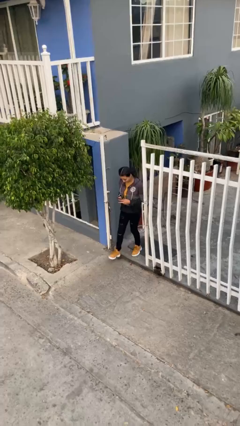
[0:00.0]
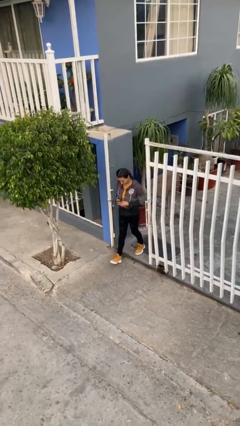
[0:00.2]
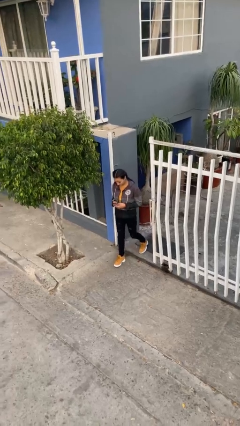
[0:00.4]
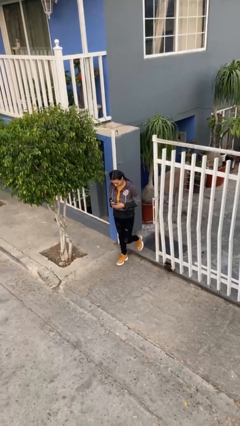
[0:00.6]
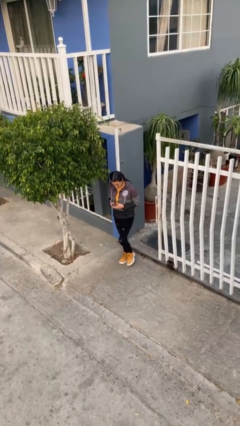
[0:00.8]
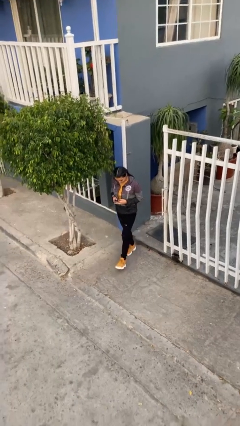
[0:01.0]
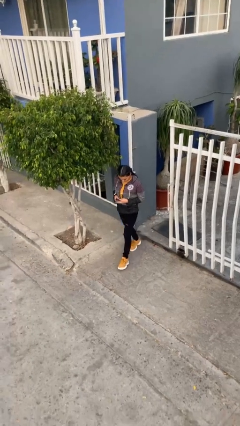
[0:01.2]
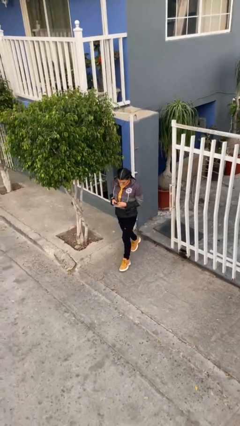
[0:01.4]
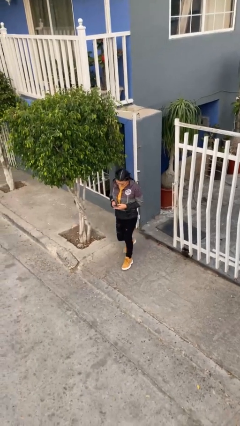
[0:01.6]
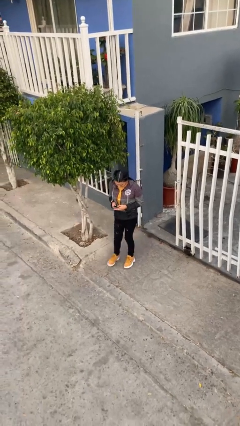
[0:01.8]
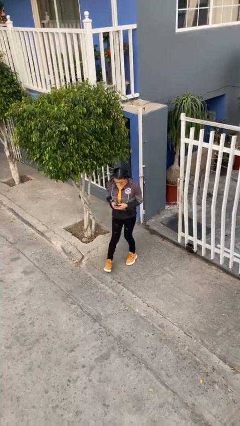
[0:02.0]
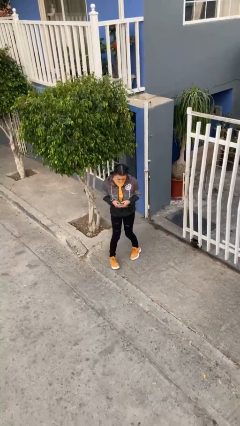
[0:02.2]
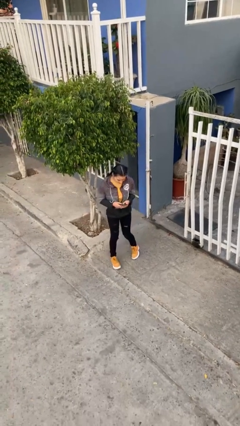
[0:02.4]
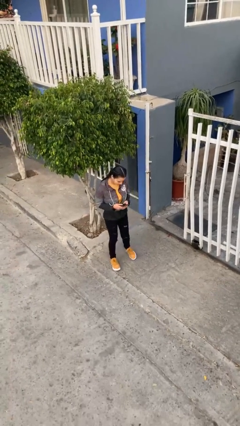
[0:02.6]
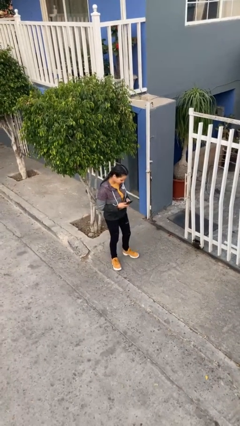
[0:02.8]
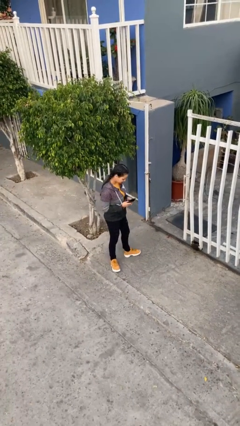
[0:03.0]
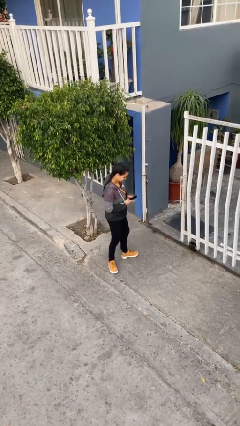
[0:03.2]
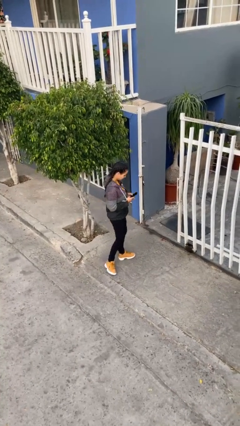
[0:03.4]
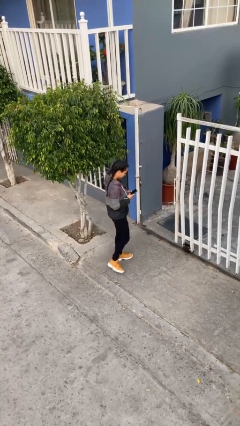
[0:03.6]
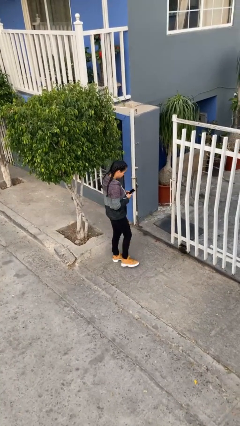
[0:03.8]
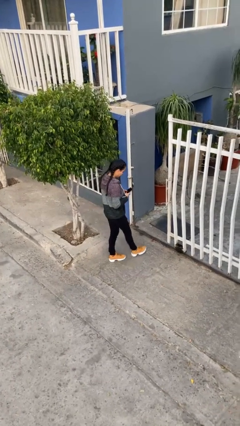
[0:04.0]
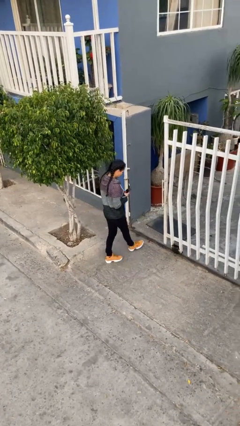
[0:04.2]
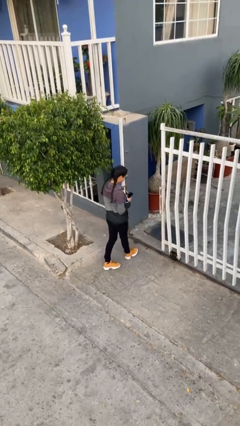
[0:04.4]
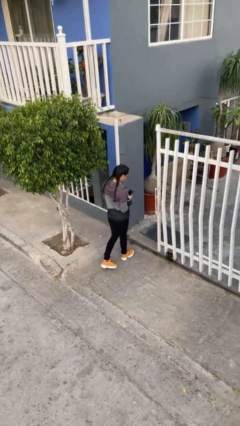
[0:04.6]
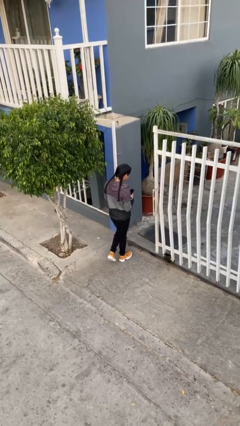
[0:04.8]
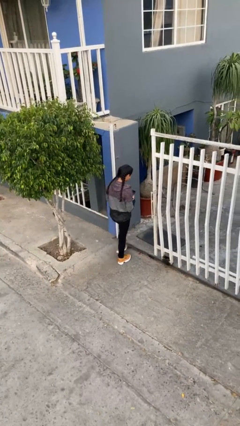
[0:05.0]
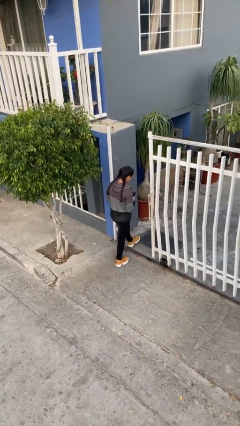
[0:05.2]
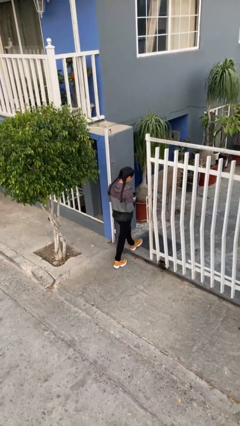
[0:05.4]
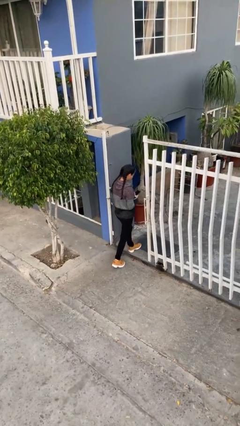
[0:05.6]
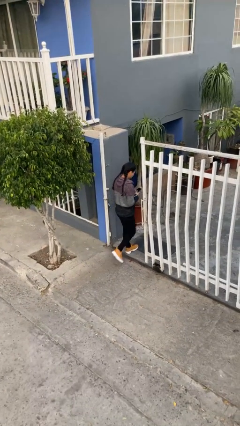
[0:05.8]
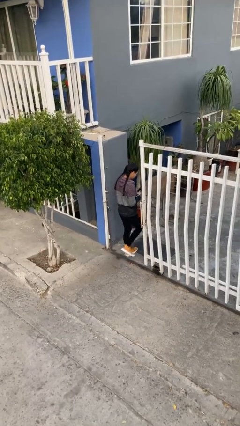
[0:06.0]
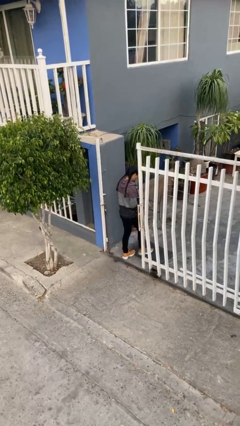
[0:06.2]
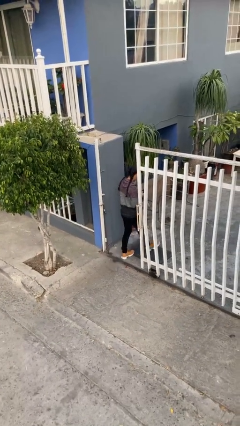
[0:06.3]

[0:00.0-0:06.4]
person exits scene through structure

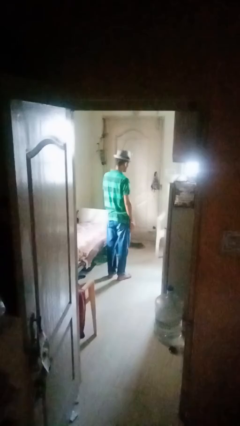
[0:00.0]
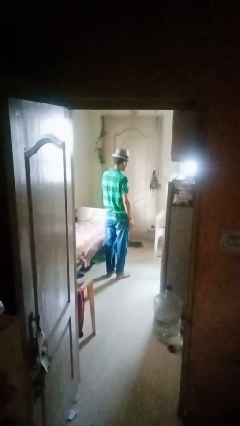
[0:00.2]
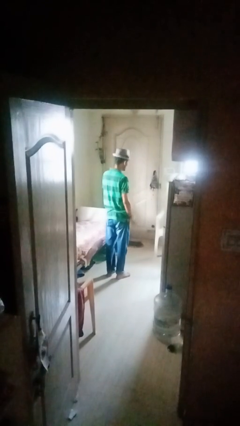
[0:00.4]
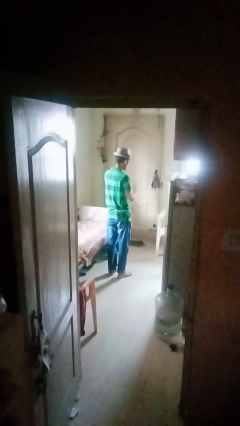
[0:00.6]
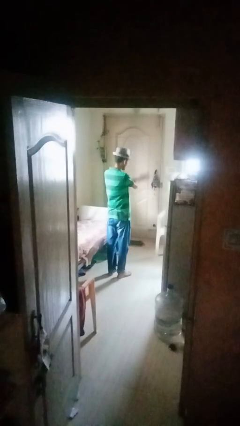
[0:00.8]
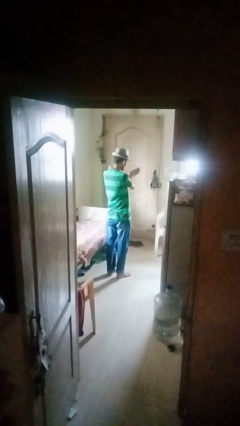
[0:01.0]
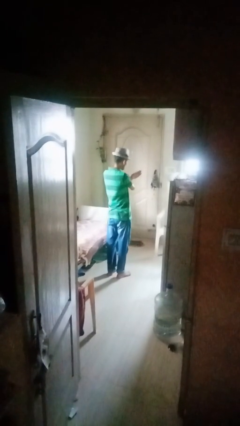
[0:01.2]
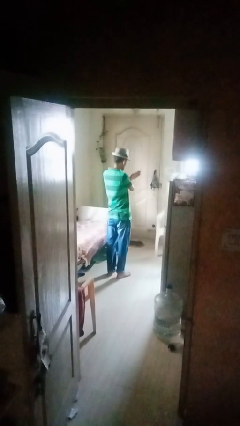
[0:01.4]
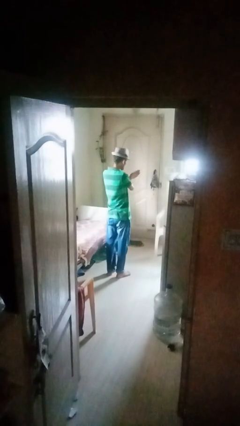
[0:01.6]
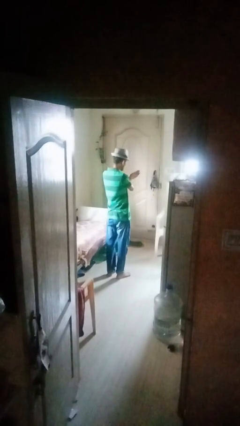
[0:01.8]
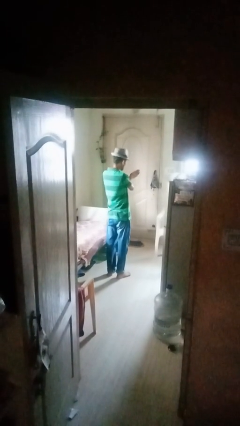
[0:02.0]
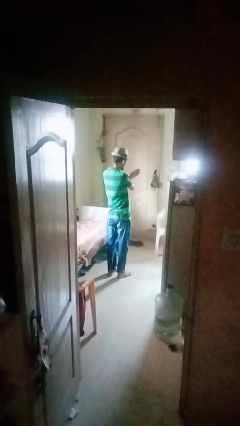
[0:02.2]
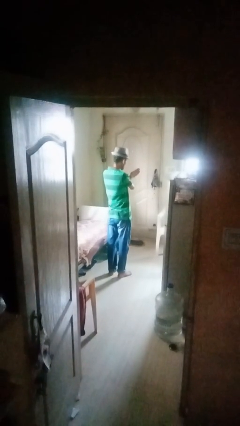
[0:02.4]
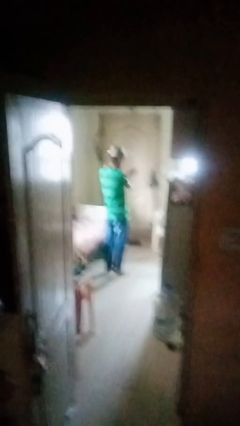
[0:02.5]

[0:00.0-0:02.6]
person gestures arms x

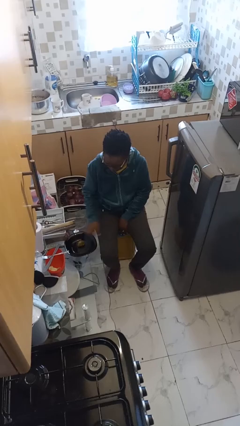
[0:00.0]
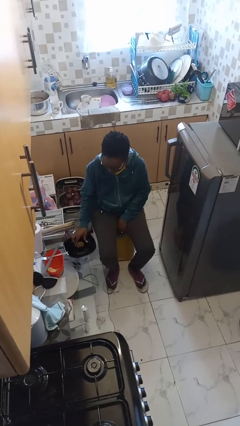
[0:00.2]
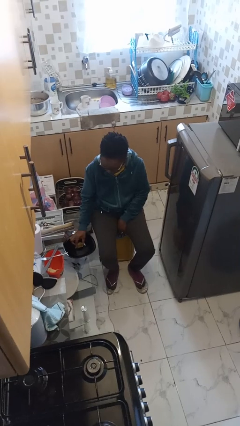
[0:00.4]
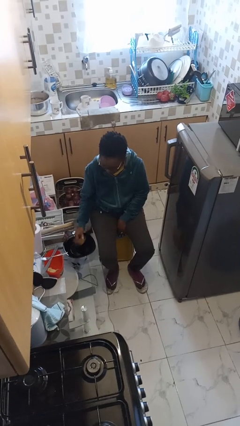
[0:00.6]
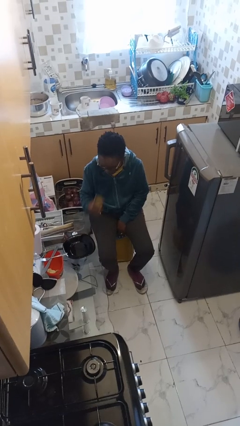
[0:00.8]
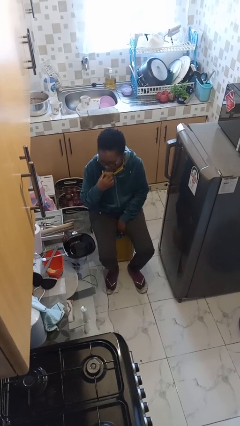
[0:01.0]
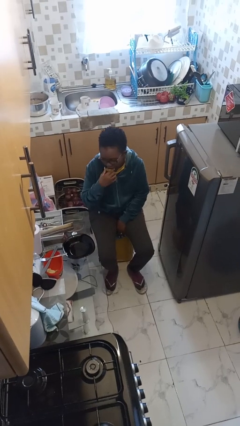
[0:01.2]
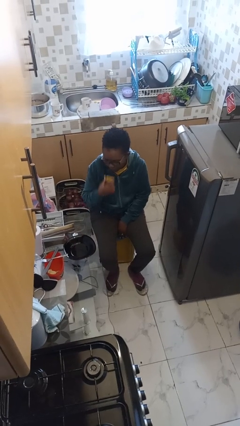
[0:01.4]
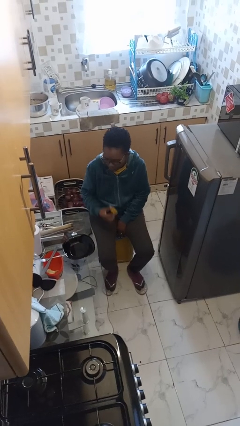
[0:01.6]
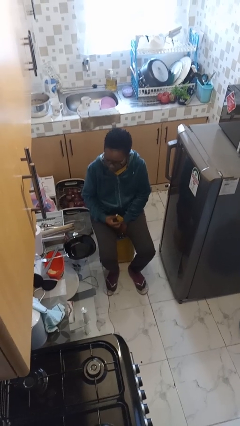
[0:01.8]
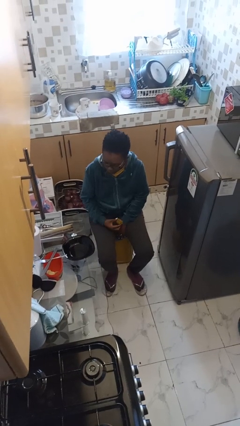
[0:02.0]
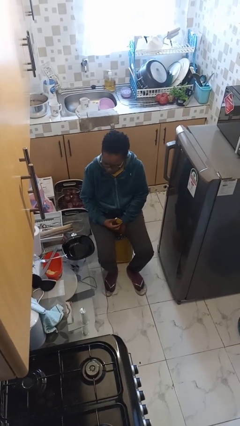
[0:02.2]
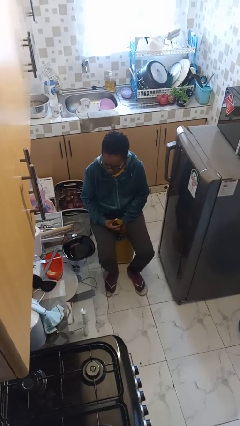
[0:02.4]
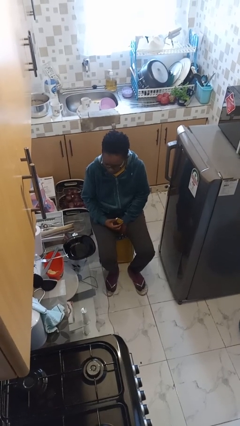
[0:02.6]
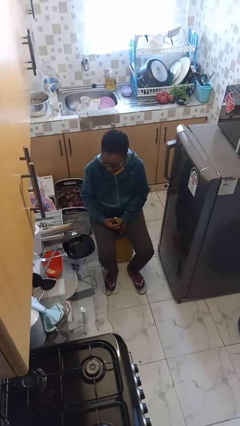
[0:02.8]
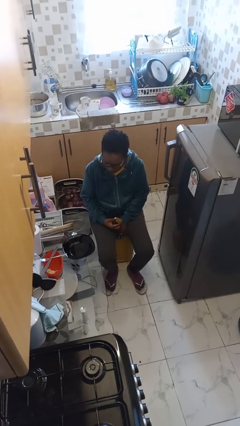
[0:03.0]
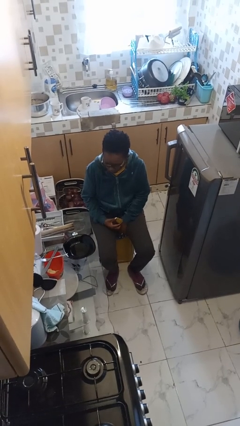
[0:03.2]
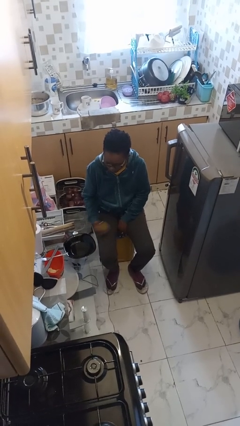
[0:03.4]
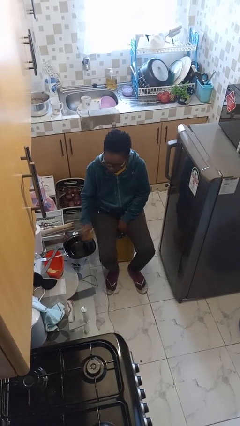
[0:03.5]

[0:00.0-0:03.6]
person eats with hands

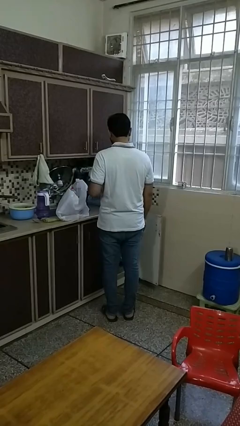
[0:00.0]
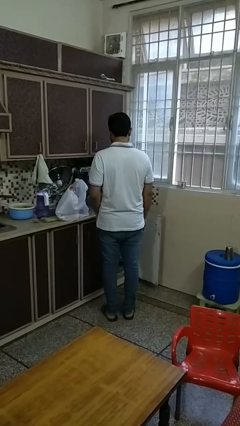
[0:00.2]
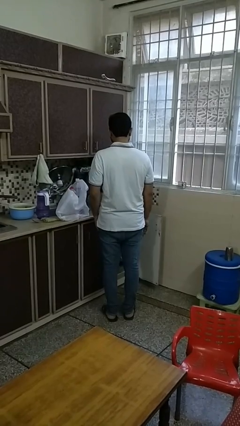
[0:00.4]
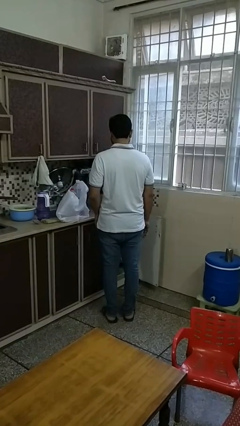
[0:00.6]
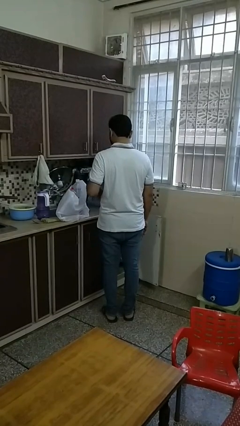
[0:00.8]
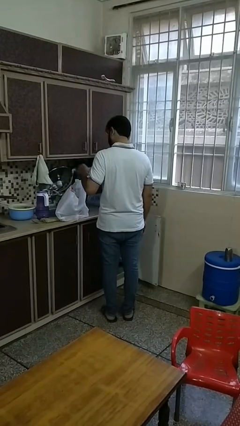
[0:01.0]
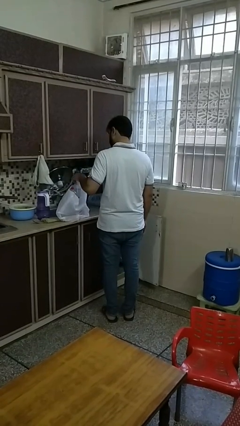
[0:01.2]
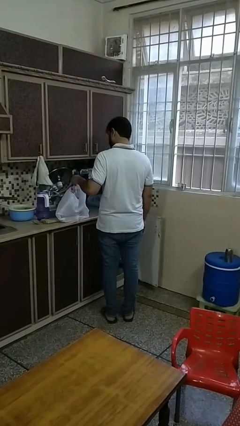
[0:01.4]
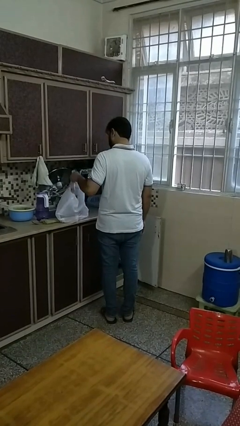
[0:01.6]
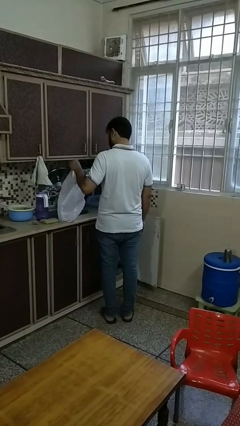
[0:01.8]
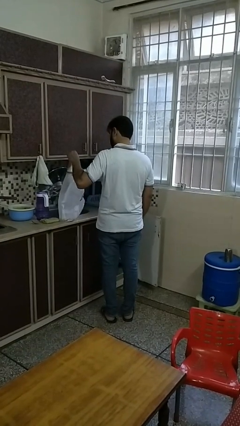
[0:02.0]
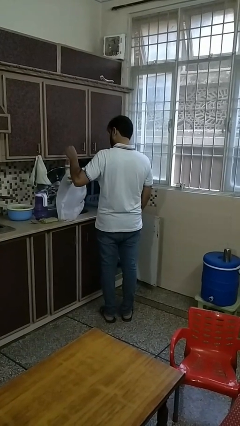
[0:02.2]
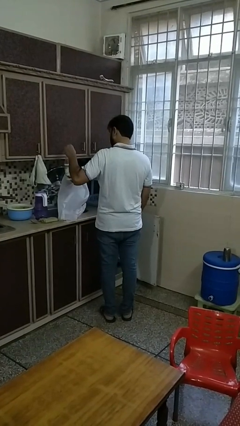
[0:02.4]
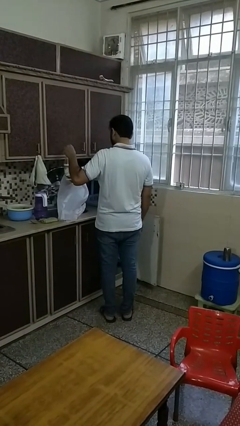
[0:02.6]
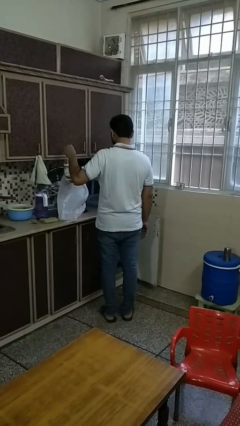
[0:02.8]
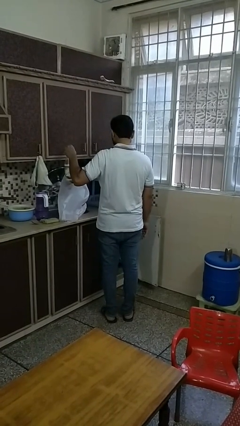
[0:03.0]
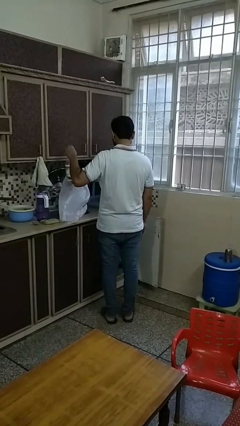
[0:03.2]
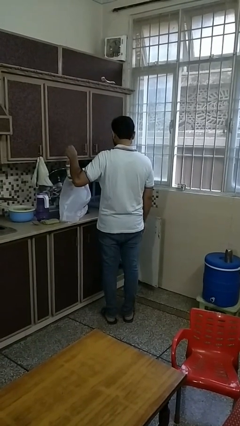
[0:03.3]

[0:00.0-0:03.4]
person takes object from bag

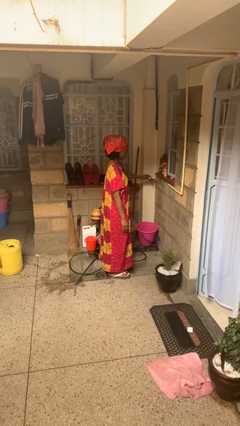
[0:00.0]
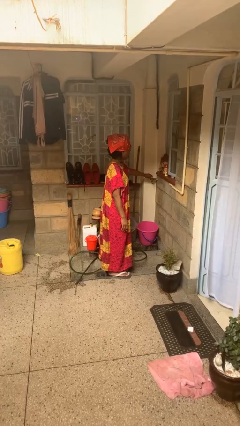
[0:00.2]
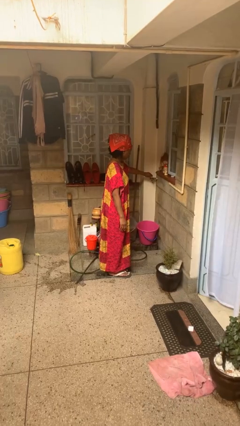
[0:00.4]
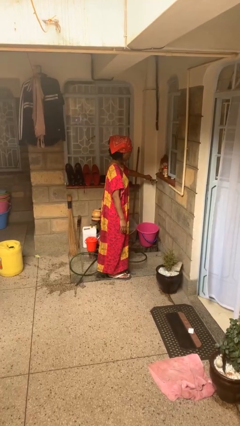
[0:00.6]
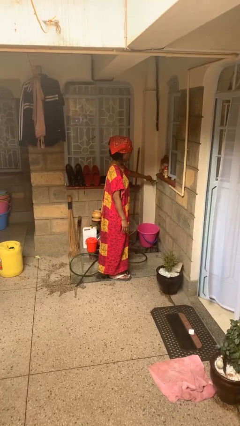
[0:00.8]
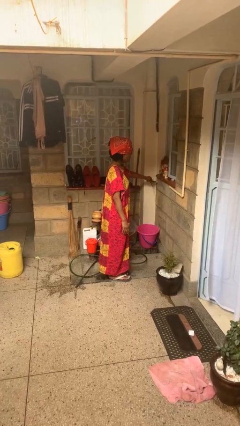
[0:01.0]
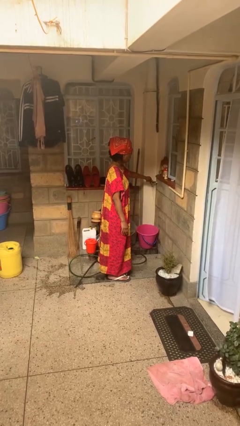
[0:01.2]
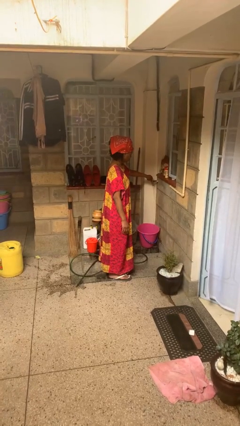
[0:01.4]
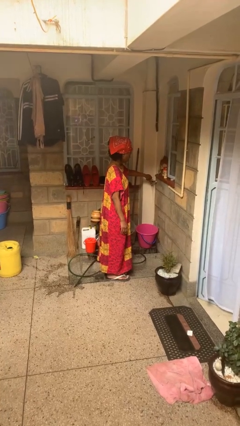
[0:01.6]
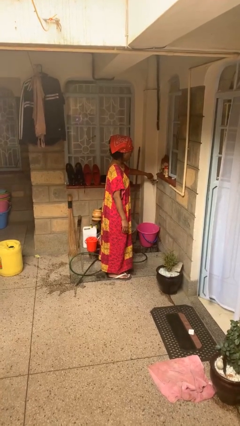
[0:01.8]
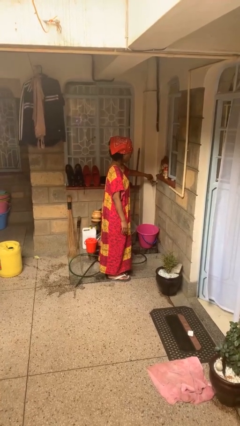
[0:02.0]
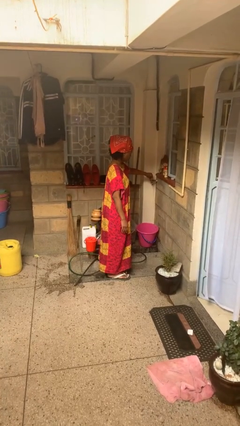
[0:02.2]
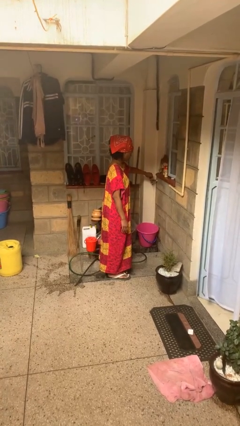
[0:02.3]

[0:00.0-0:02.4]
person turns on faucet
